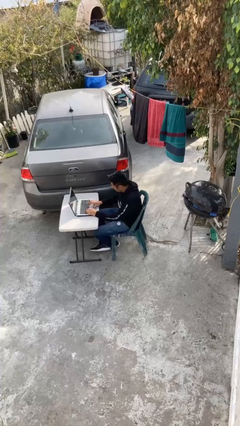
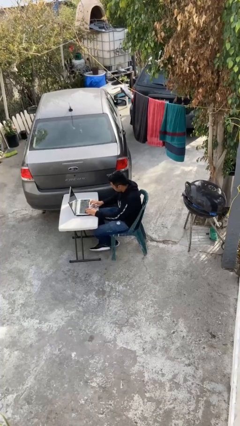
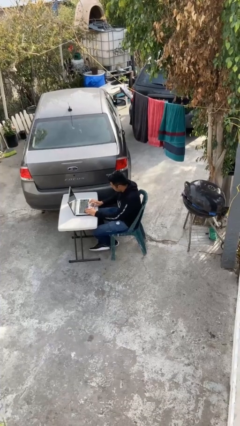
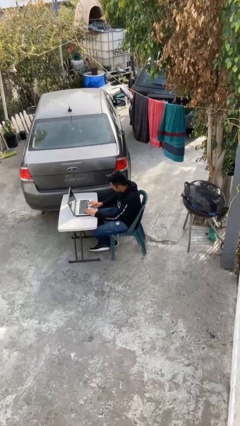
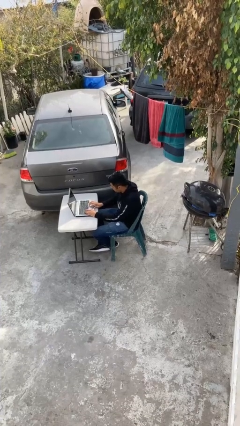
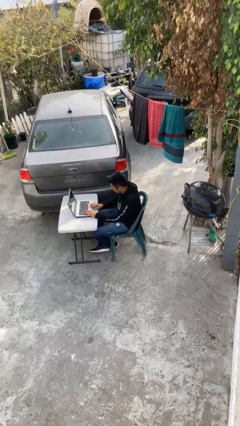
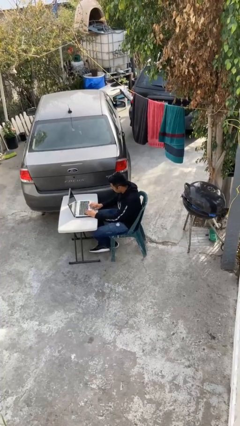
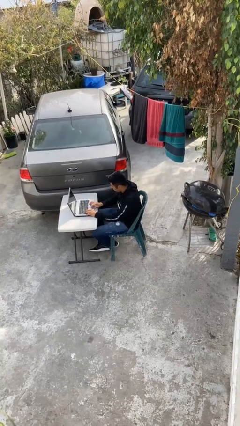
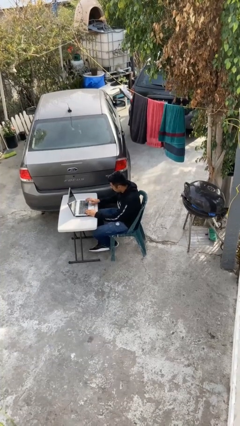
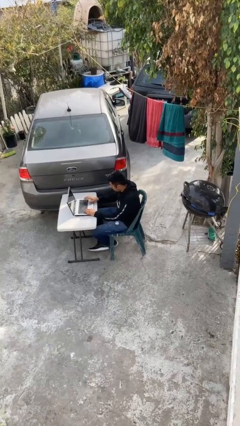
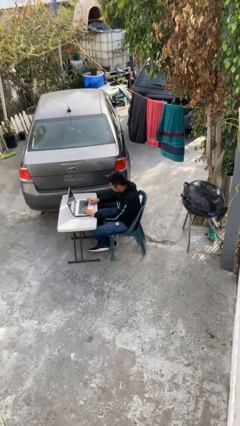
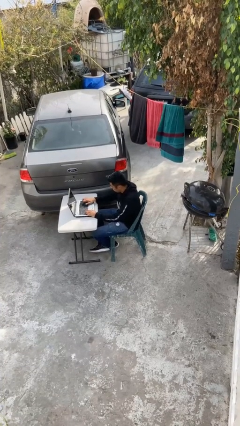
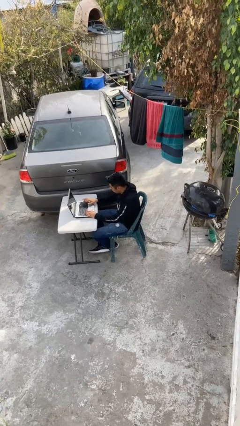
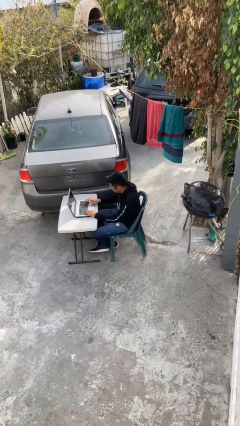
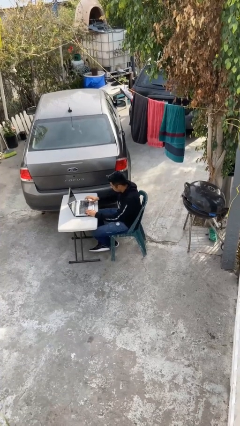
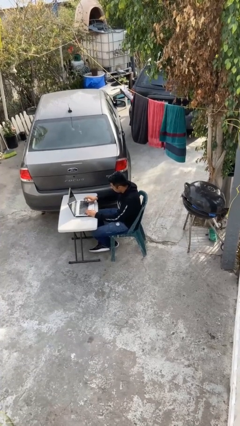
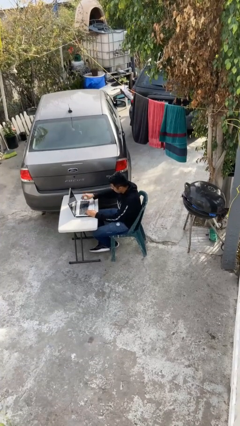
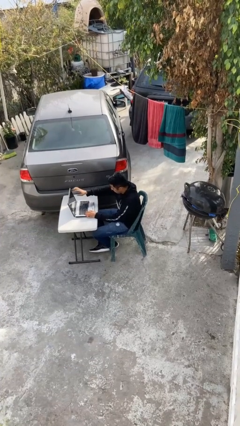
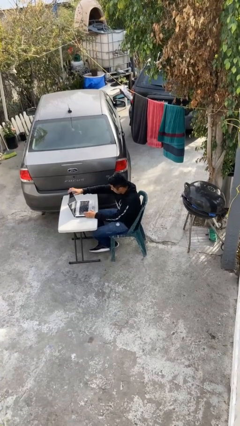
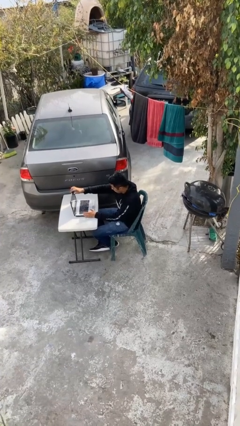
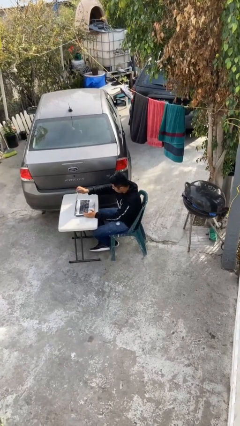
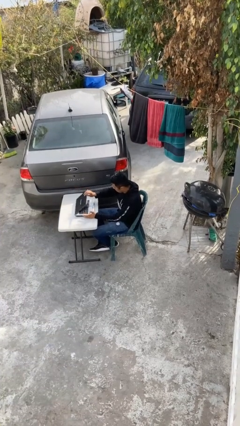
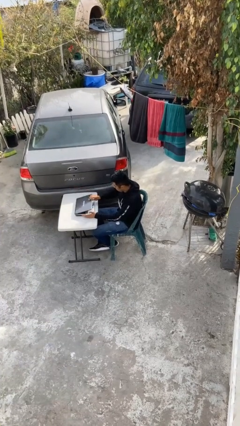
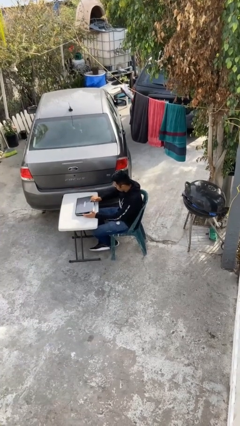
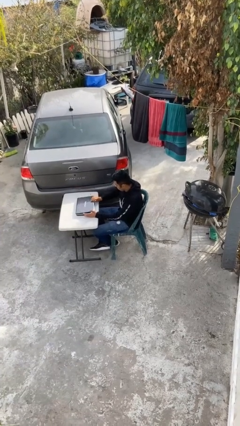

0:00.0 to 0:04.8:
person interacts with laptop

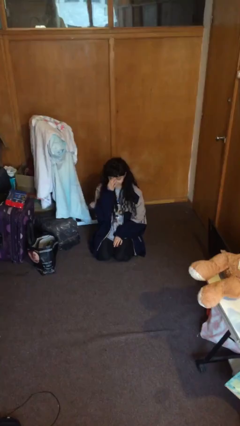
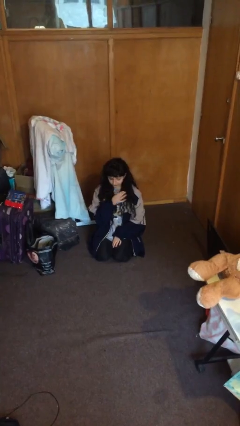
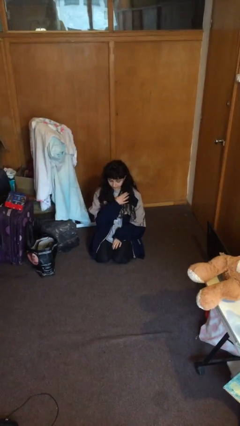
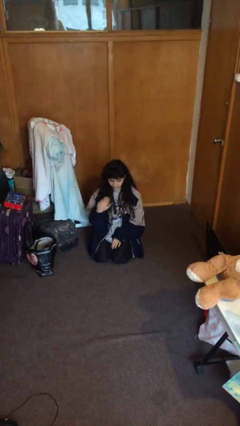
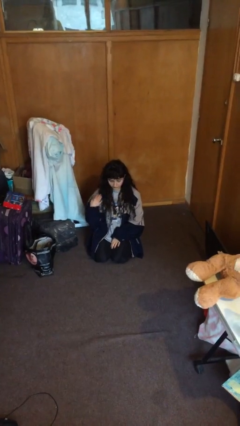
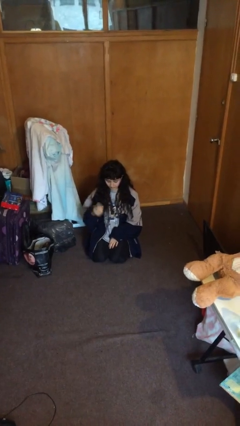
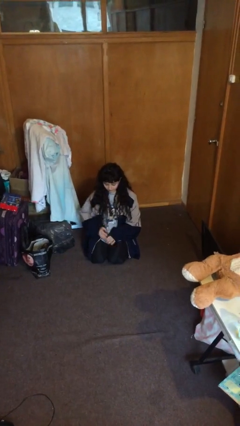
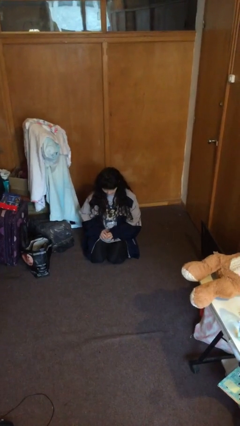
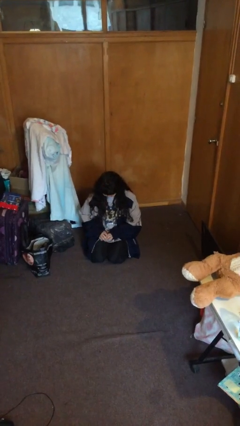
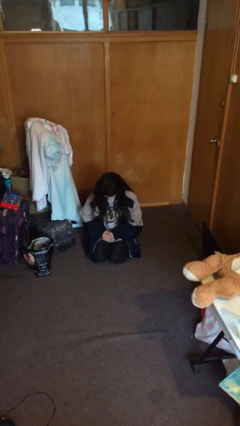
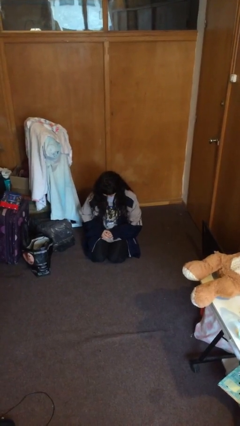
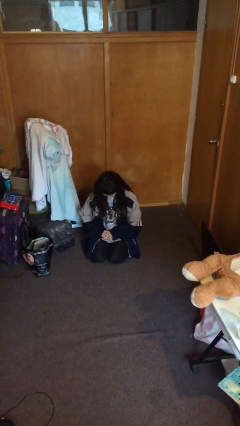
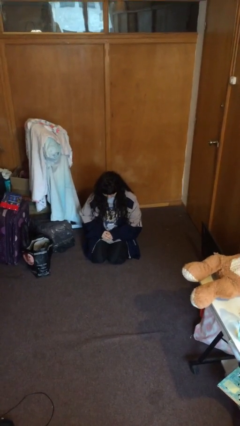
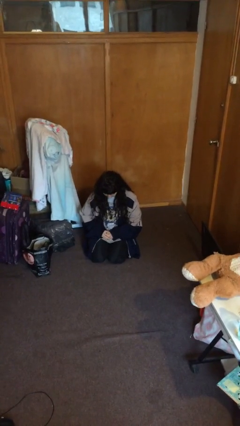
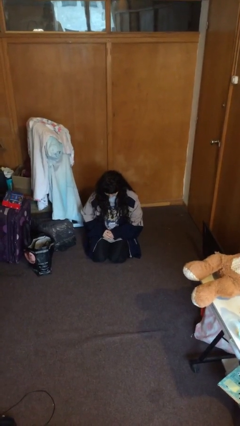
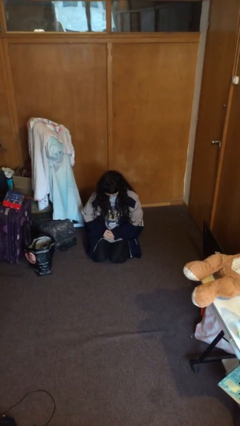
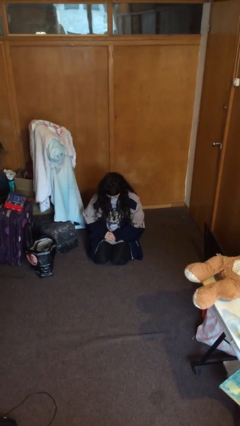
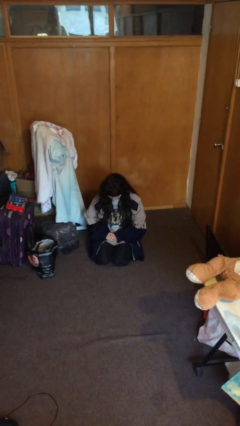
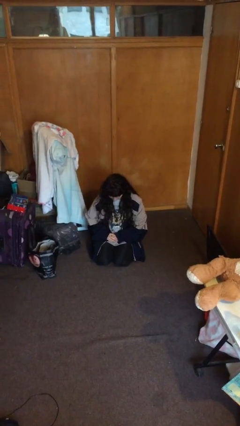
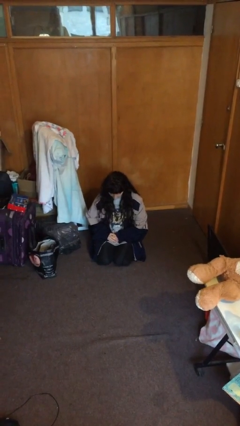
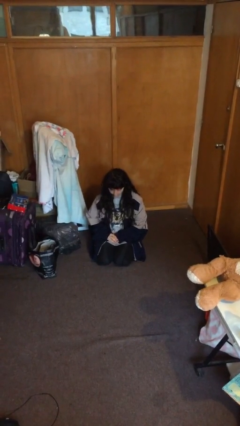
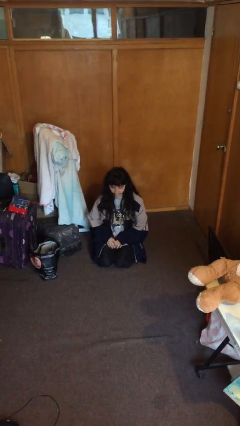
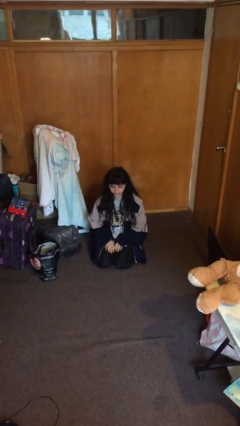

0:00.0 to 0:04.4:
person prays

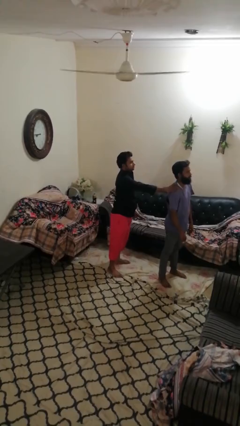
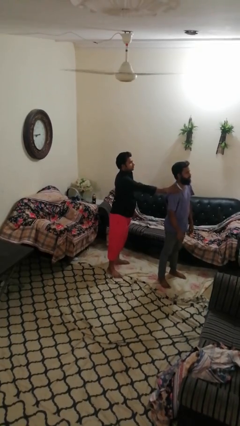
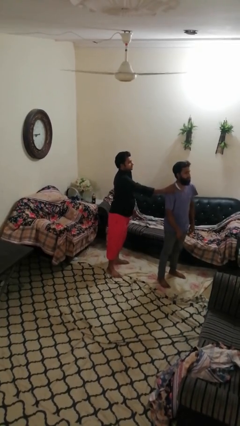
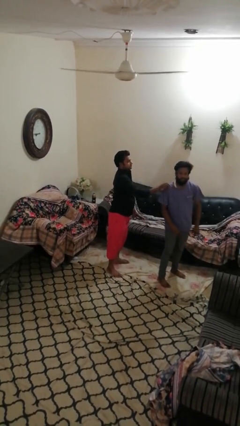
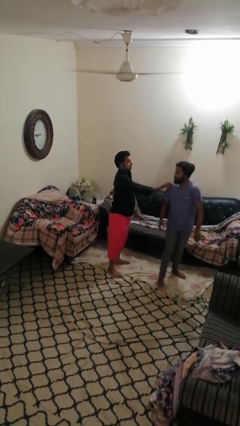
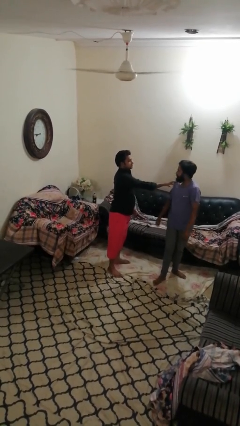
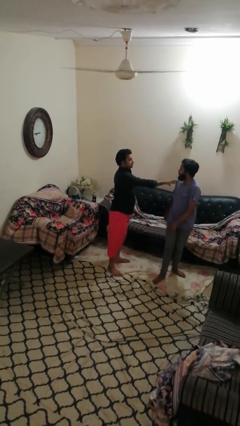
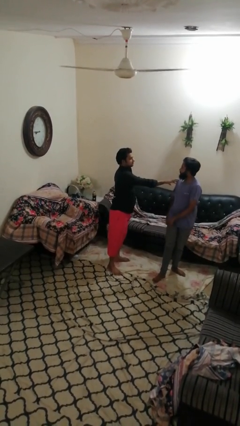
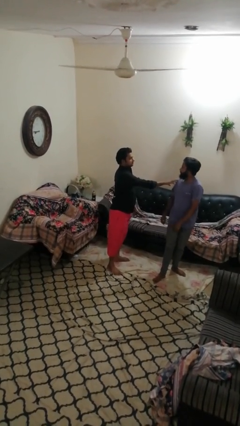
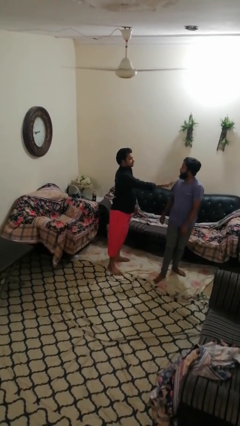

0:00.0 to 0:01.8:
person spins person around

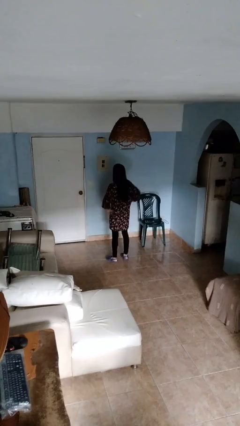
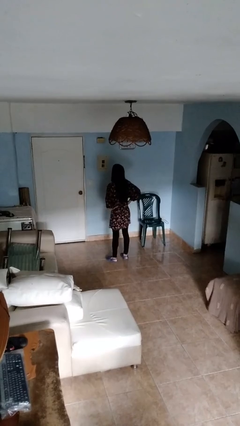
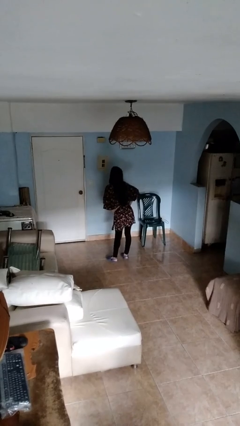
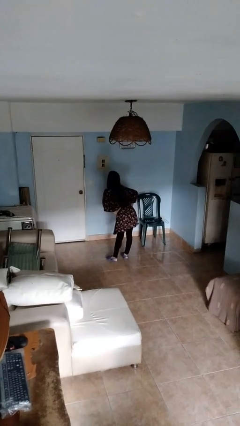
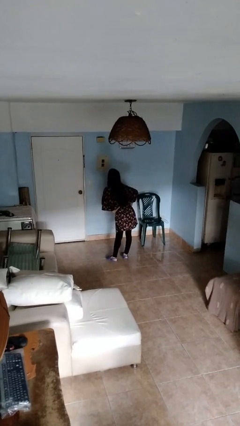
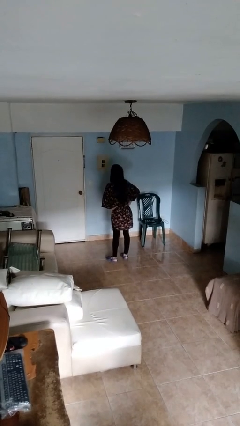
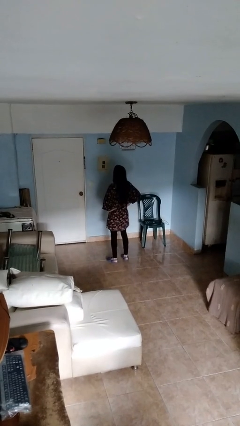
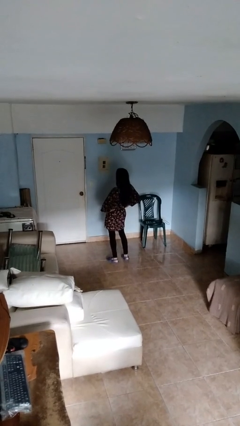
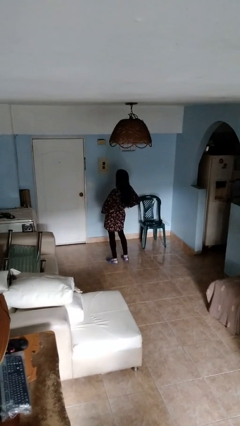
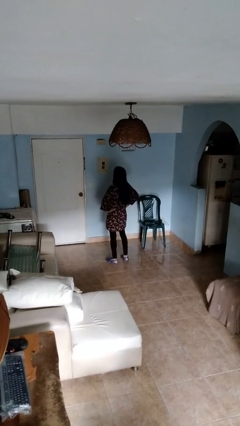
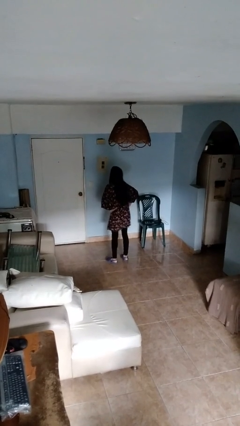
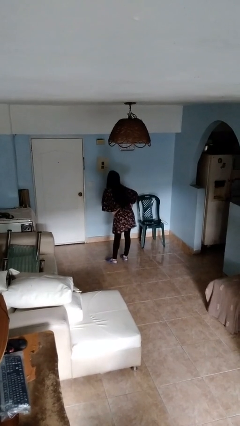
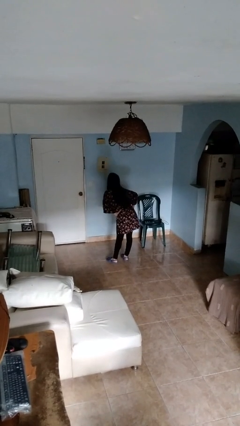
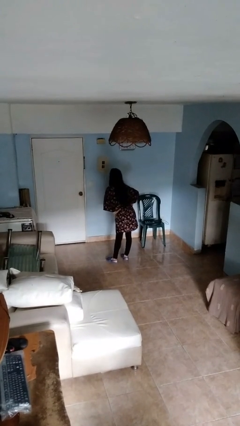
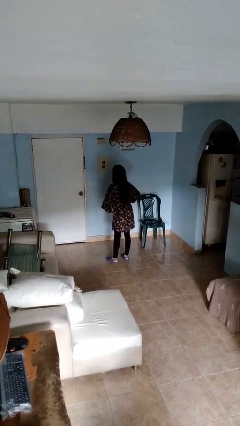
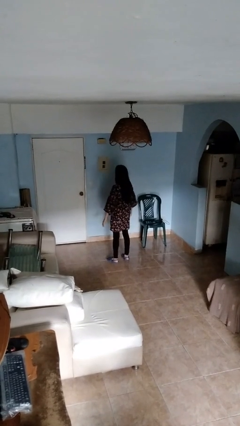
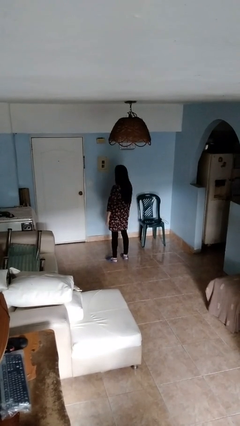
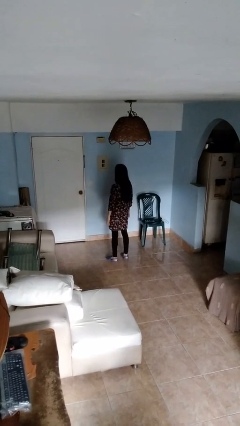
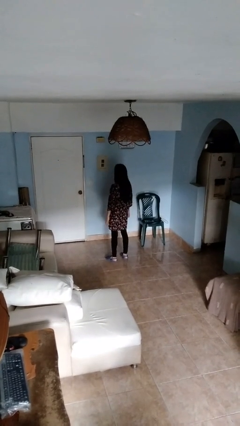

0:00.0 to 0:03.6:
person wiggles hips

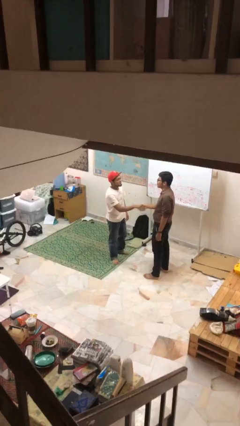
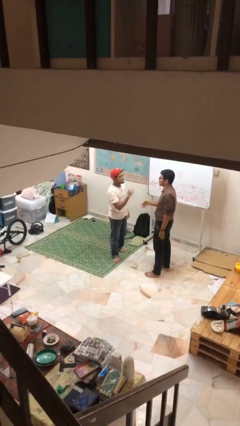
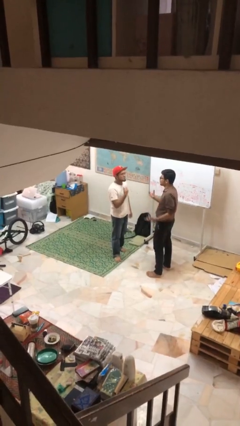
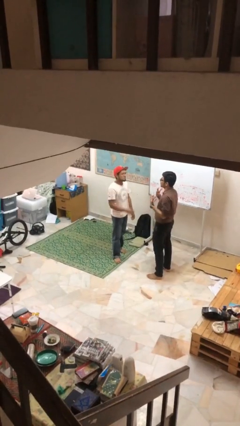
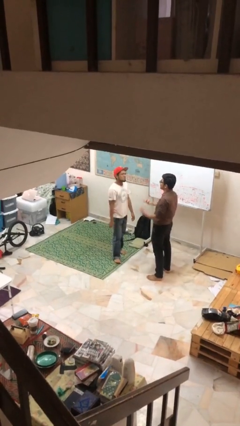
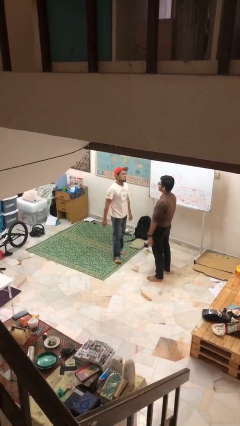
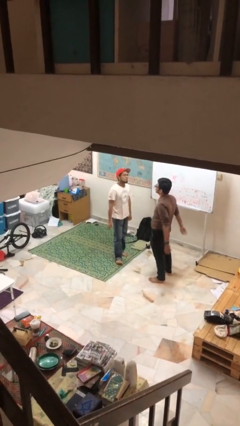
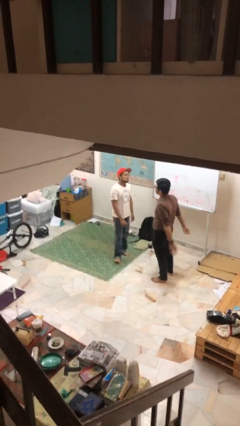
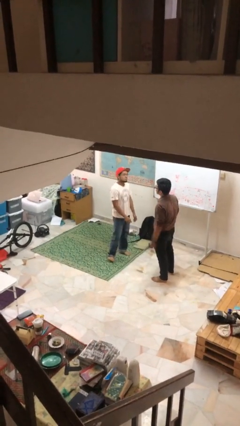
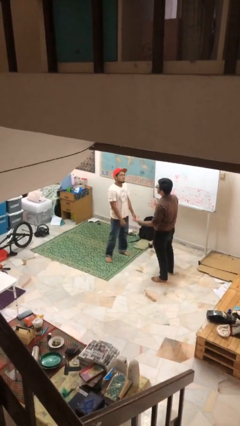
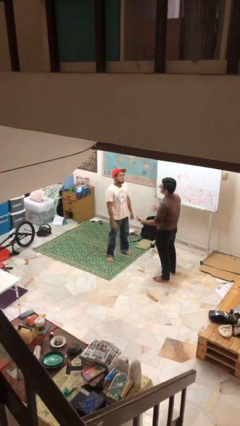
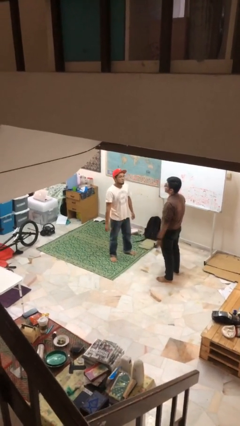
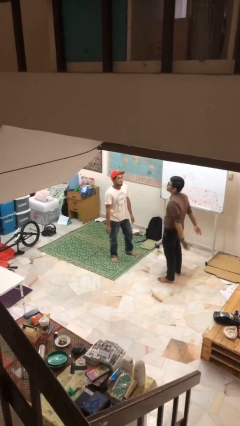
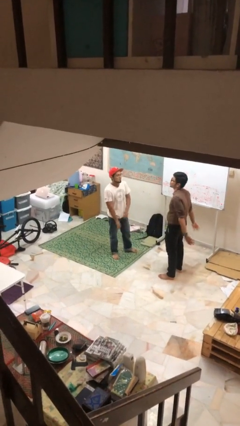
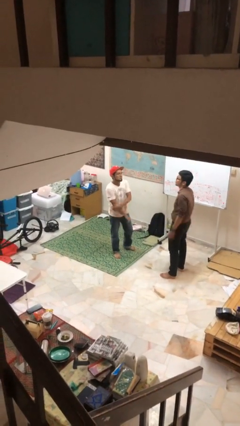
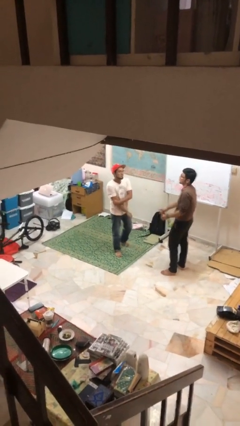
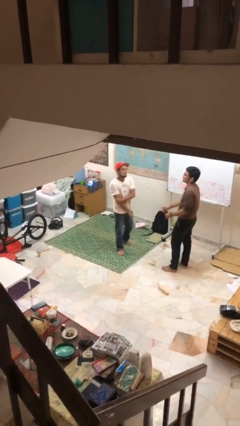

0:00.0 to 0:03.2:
person talks to person
